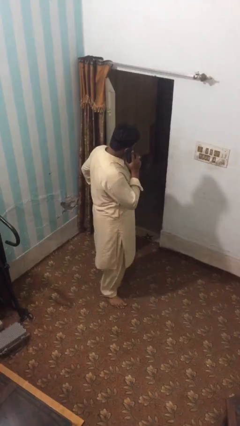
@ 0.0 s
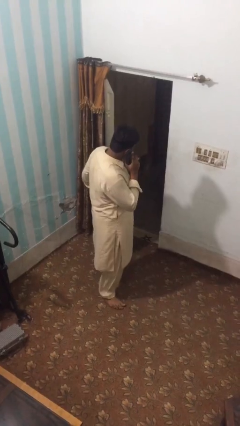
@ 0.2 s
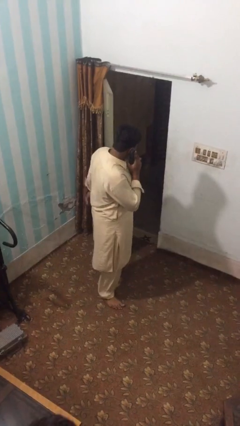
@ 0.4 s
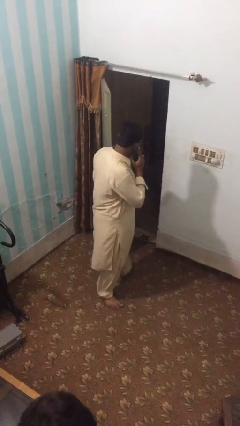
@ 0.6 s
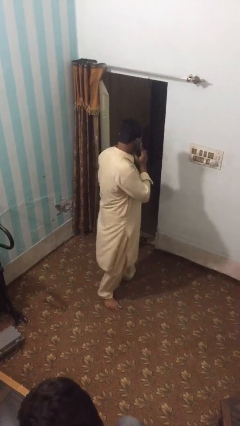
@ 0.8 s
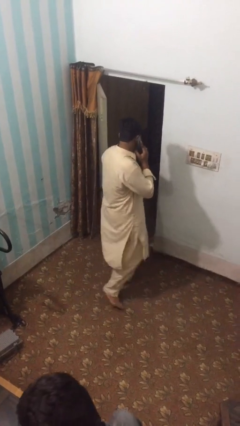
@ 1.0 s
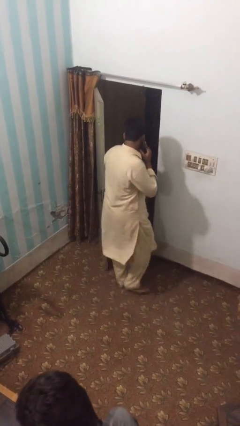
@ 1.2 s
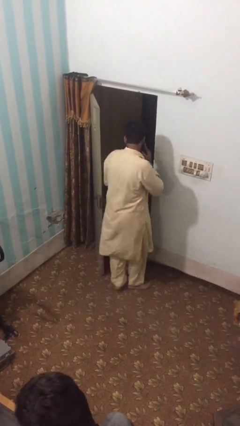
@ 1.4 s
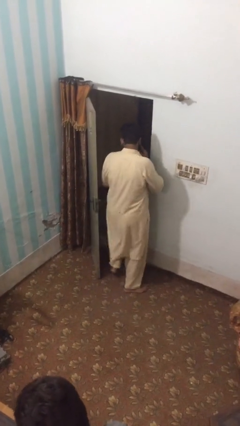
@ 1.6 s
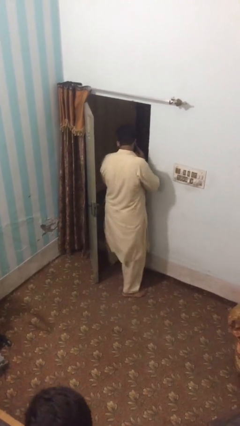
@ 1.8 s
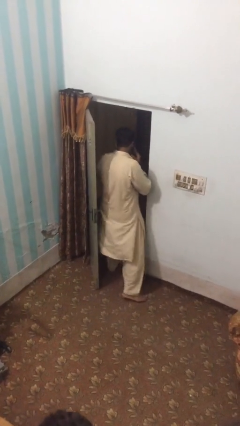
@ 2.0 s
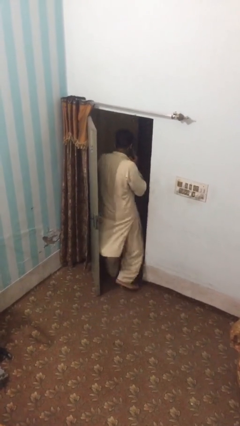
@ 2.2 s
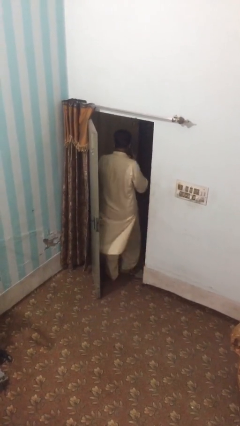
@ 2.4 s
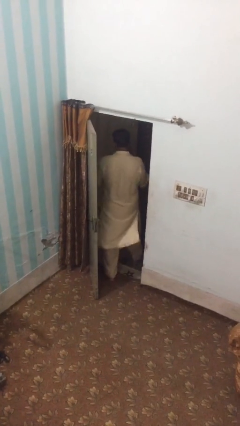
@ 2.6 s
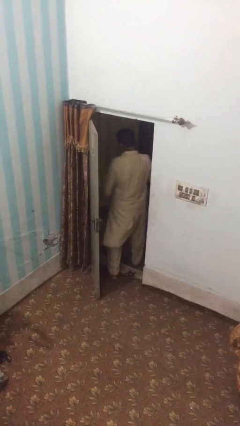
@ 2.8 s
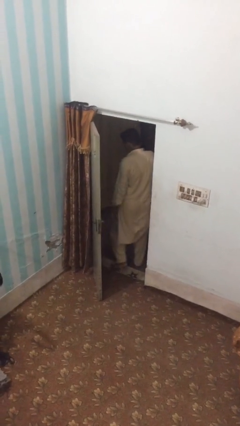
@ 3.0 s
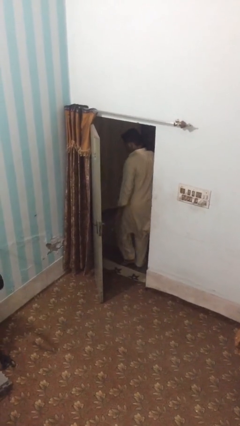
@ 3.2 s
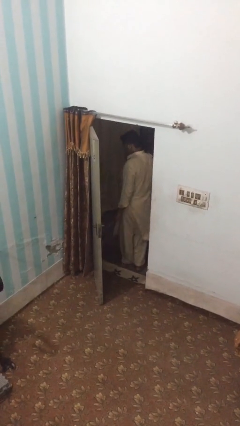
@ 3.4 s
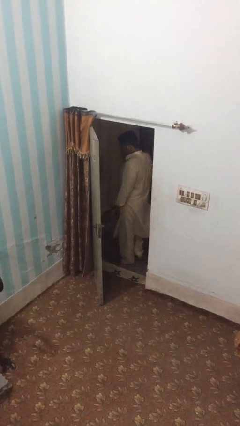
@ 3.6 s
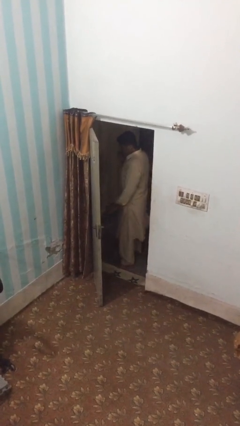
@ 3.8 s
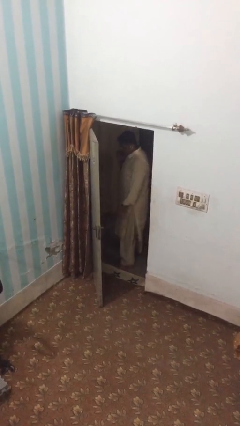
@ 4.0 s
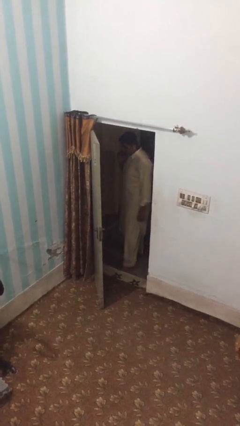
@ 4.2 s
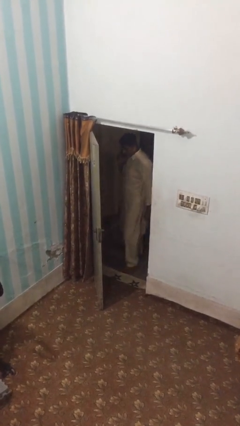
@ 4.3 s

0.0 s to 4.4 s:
person exits scene through structure

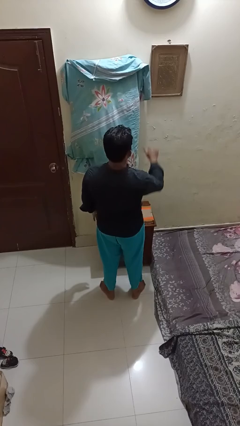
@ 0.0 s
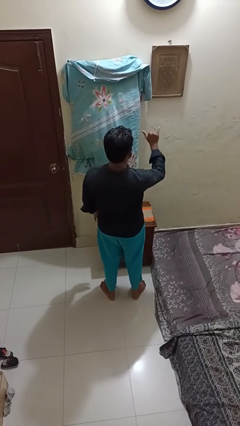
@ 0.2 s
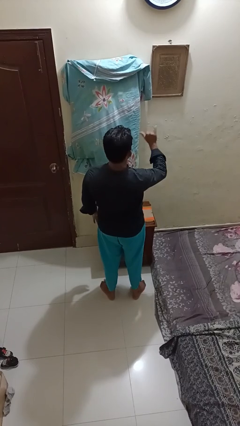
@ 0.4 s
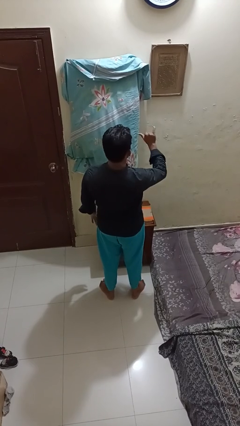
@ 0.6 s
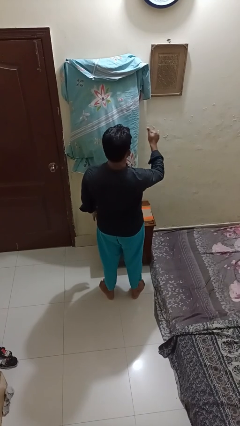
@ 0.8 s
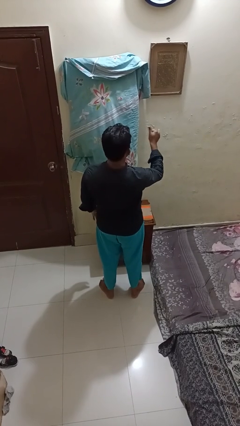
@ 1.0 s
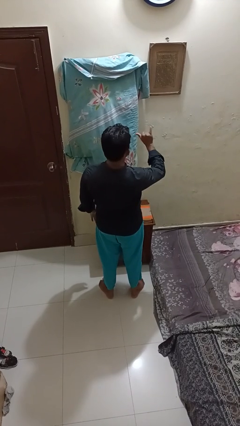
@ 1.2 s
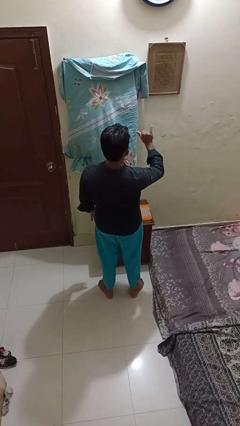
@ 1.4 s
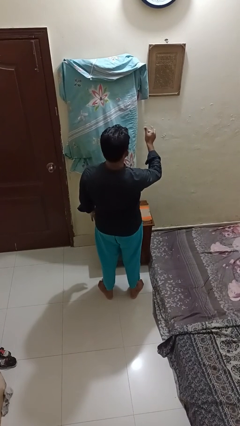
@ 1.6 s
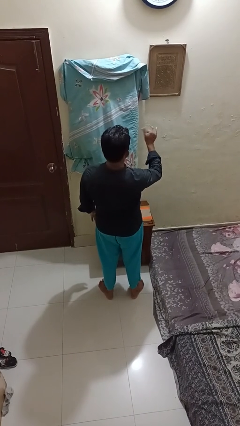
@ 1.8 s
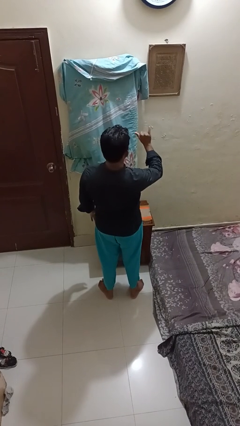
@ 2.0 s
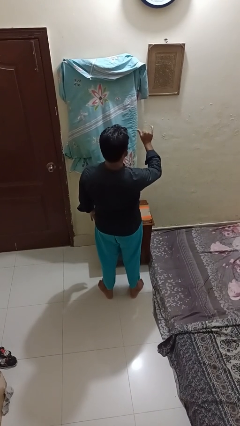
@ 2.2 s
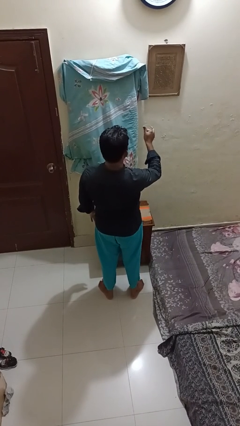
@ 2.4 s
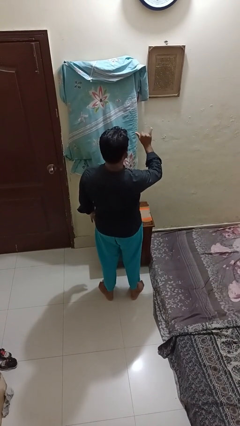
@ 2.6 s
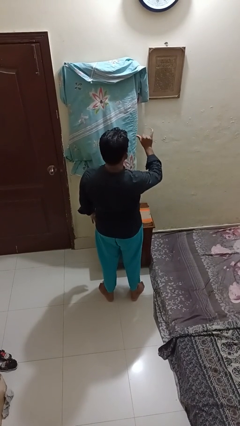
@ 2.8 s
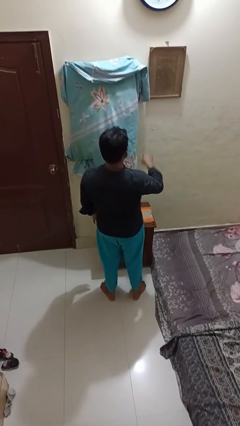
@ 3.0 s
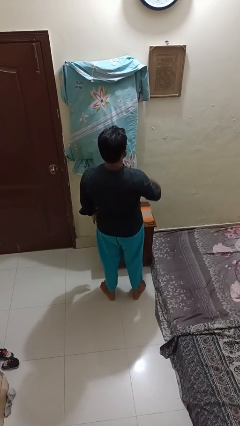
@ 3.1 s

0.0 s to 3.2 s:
person gestures hang loose

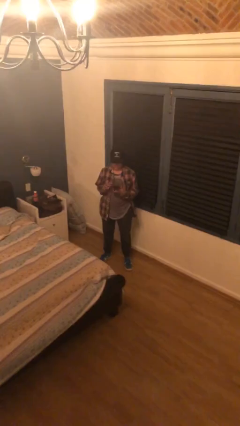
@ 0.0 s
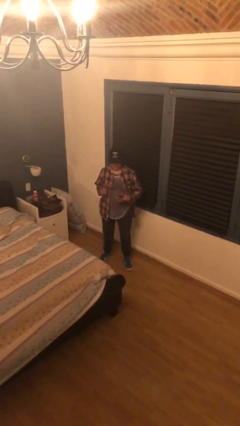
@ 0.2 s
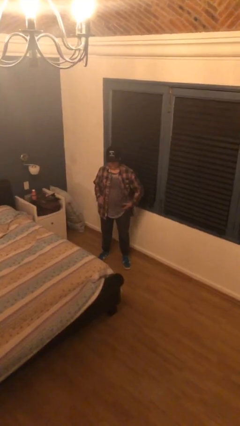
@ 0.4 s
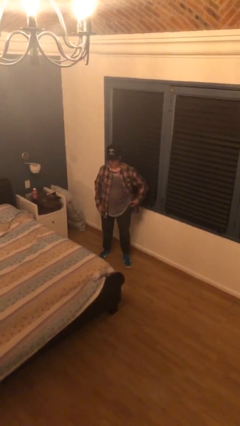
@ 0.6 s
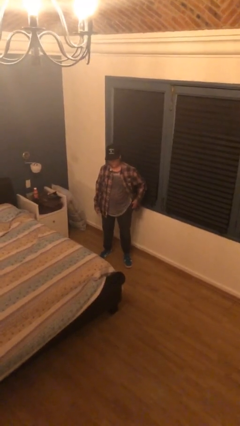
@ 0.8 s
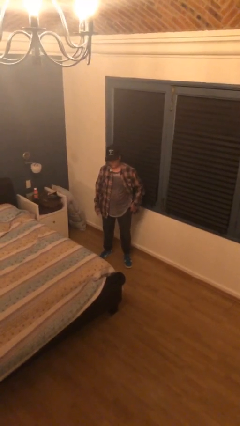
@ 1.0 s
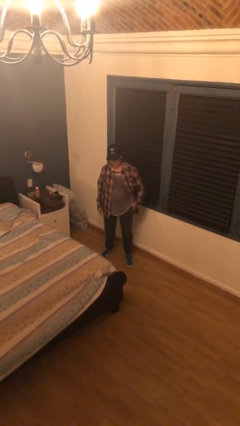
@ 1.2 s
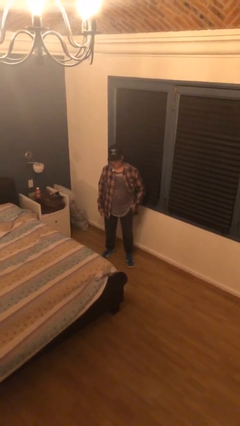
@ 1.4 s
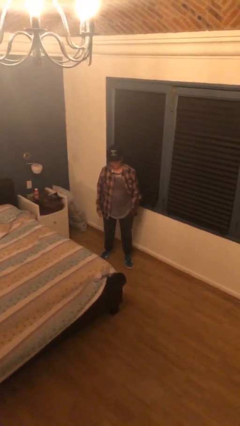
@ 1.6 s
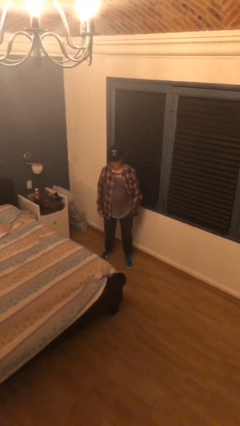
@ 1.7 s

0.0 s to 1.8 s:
person puts phone into pocket

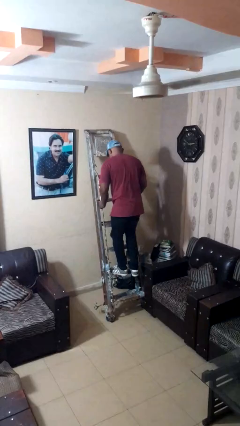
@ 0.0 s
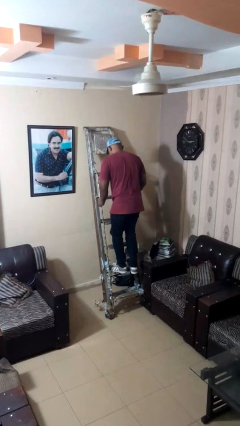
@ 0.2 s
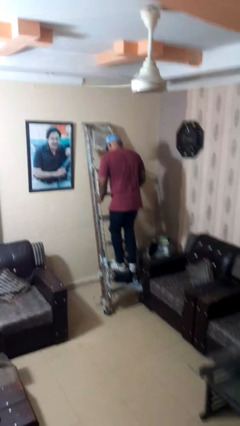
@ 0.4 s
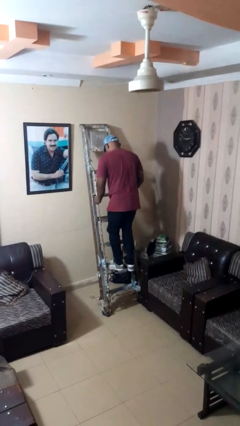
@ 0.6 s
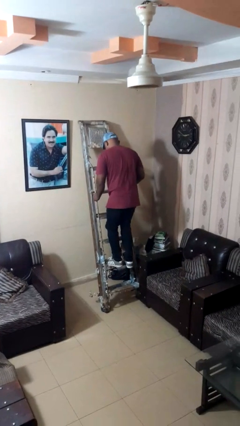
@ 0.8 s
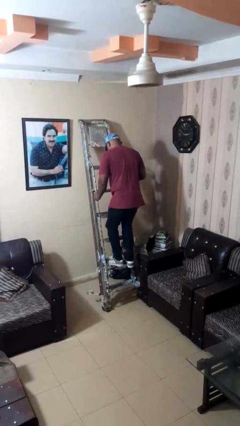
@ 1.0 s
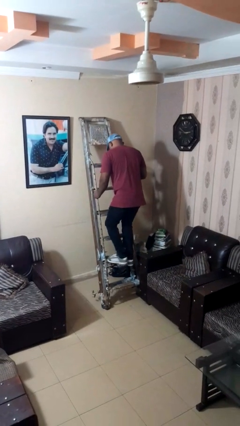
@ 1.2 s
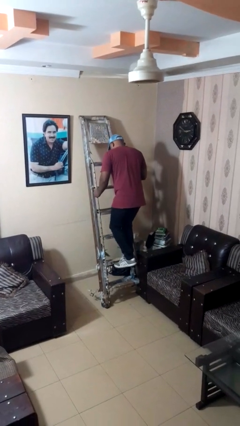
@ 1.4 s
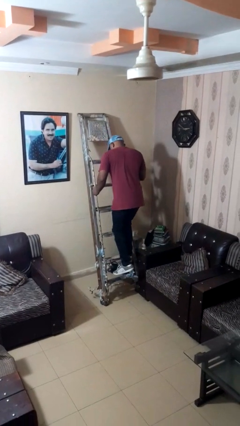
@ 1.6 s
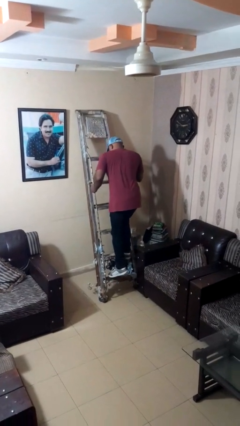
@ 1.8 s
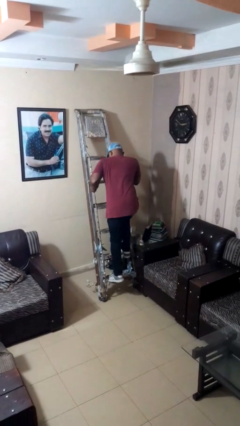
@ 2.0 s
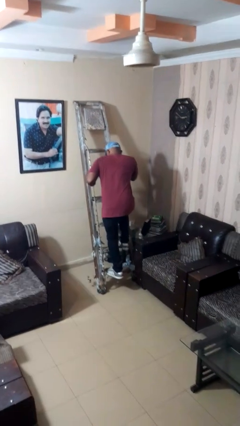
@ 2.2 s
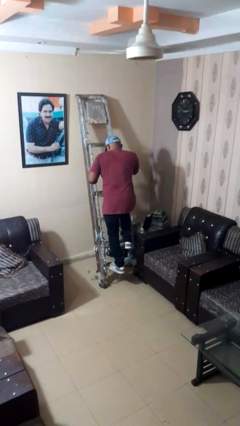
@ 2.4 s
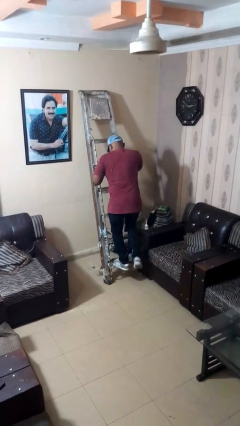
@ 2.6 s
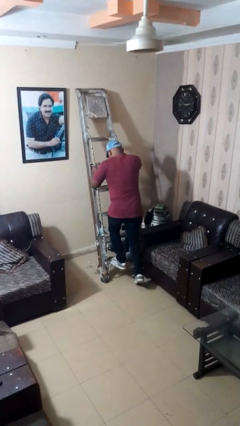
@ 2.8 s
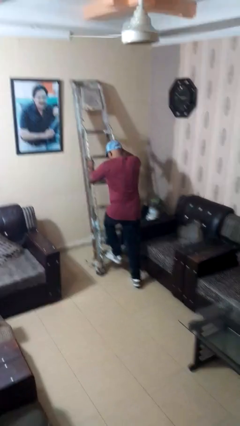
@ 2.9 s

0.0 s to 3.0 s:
person climbs down ladder

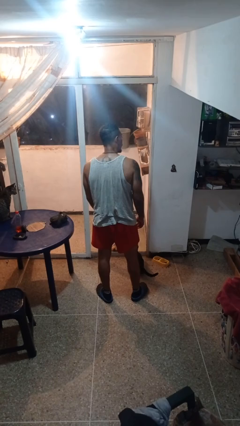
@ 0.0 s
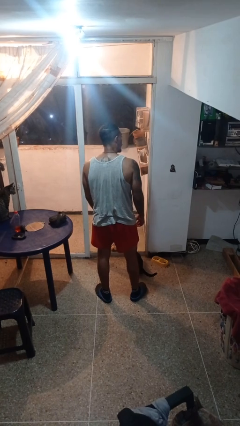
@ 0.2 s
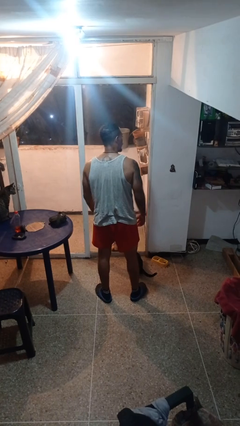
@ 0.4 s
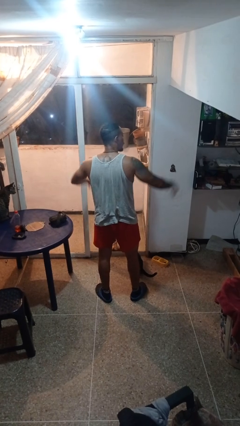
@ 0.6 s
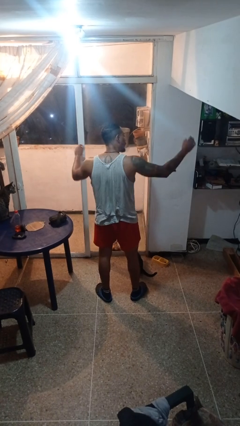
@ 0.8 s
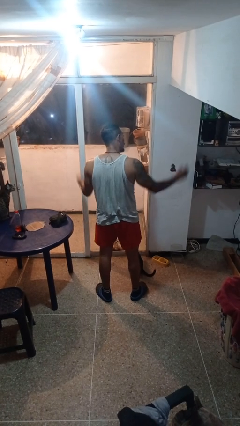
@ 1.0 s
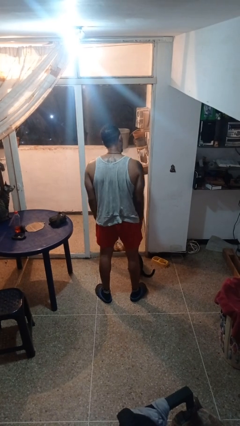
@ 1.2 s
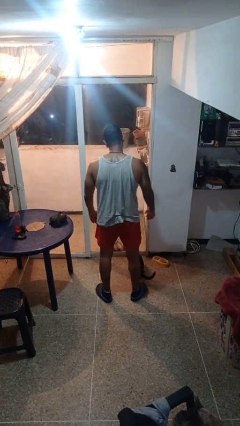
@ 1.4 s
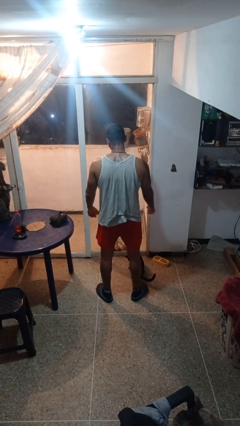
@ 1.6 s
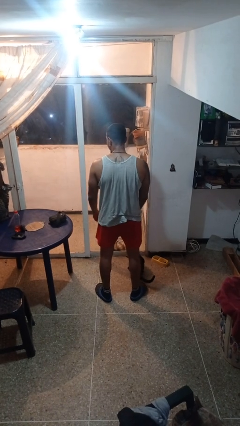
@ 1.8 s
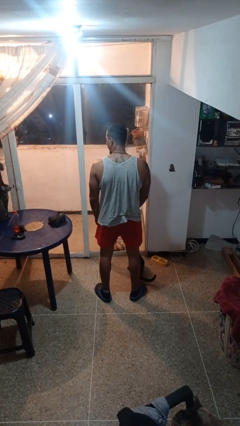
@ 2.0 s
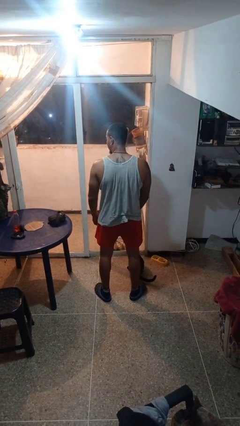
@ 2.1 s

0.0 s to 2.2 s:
person slaps hands on thighs

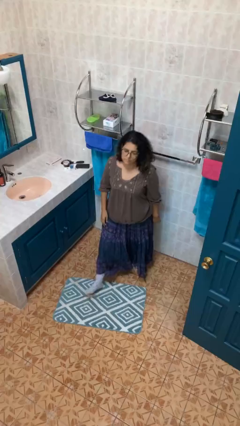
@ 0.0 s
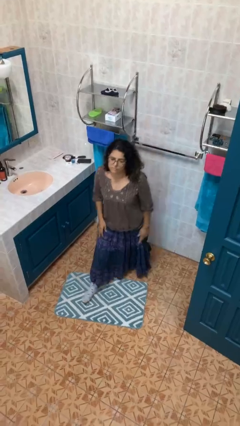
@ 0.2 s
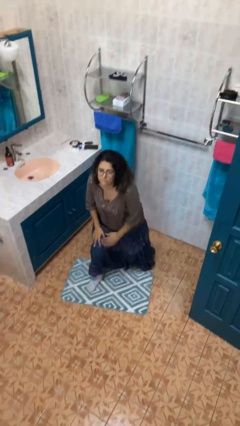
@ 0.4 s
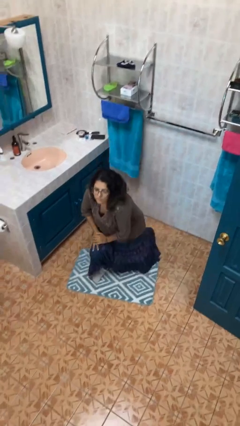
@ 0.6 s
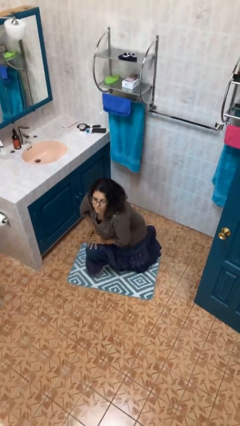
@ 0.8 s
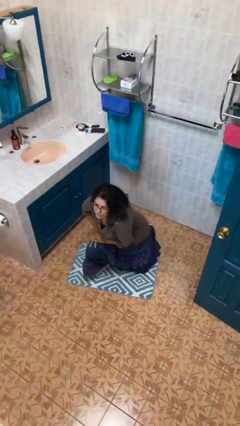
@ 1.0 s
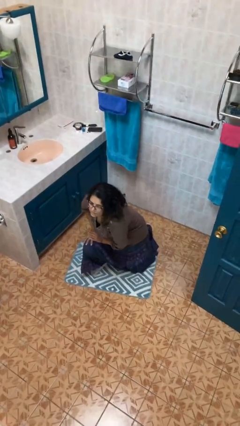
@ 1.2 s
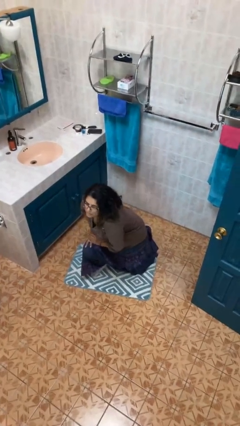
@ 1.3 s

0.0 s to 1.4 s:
person kneels

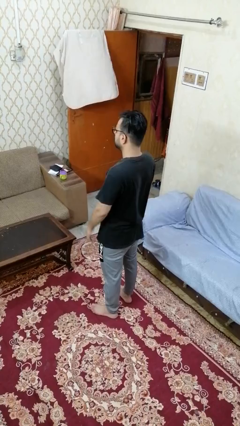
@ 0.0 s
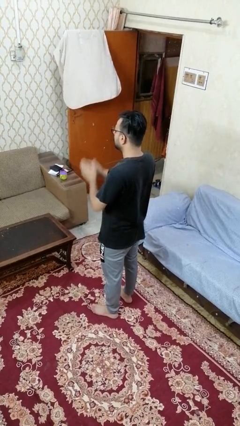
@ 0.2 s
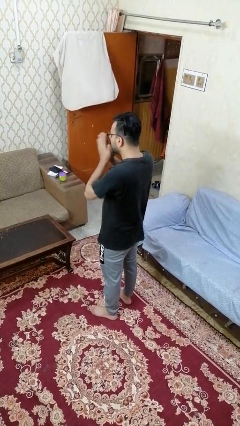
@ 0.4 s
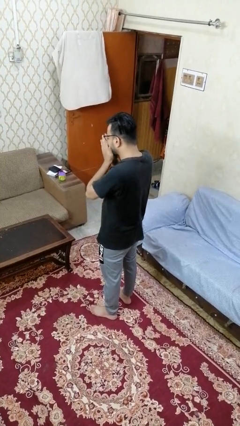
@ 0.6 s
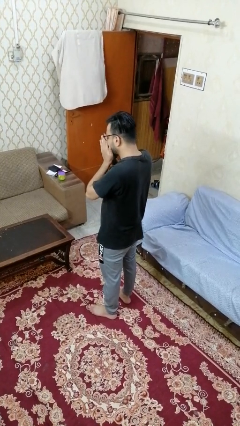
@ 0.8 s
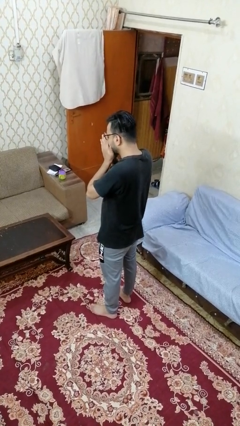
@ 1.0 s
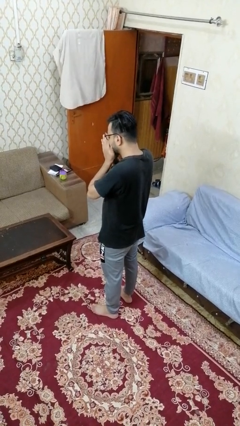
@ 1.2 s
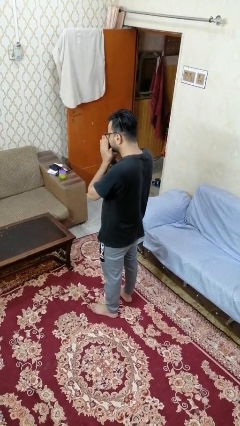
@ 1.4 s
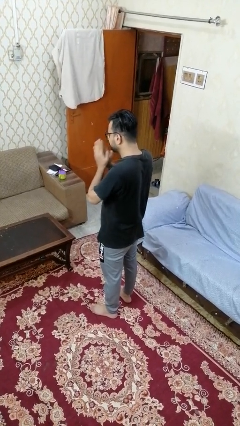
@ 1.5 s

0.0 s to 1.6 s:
person sneezes into hand
